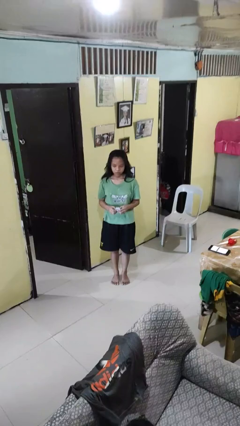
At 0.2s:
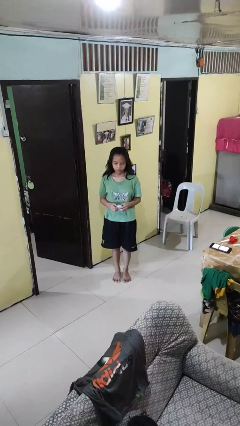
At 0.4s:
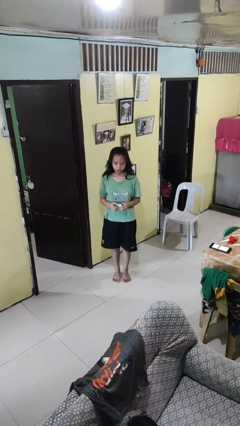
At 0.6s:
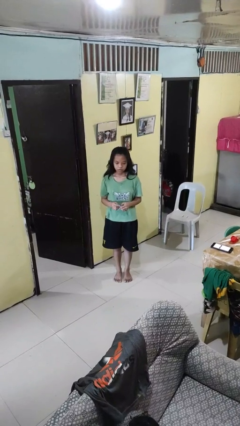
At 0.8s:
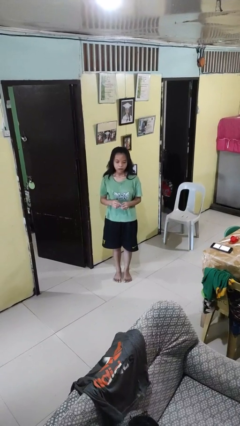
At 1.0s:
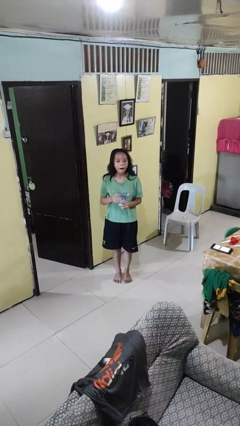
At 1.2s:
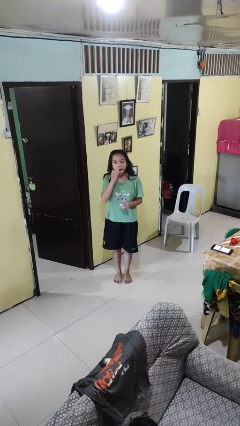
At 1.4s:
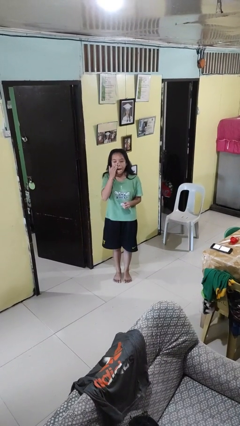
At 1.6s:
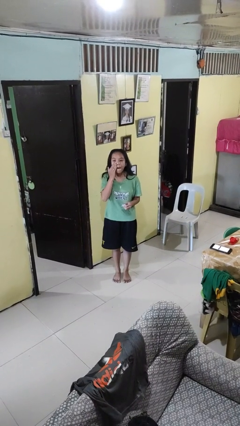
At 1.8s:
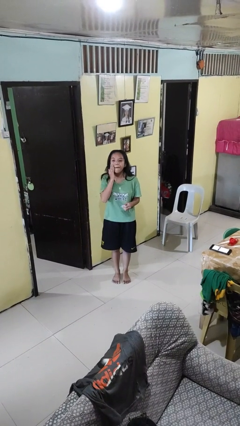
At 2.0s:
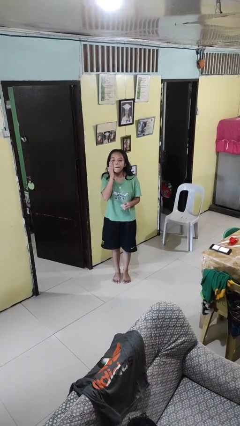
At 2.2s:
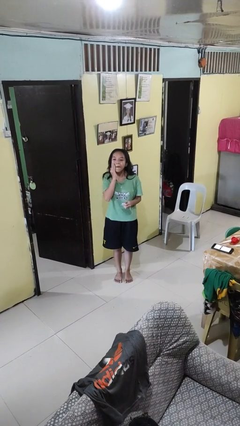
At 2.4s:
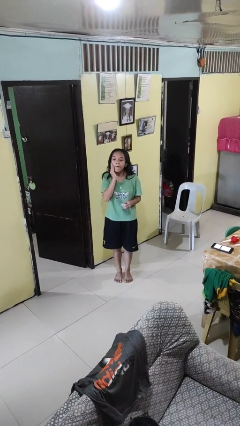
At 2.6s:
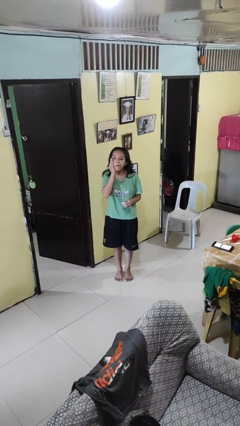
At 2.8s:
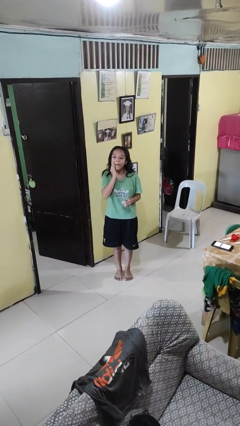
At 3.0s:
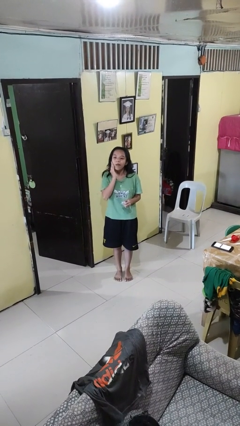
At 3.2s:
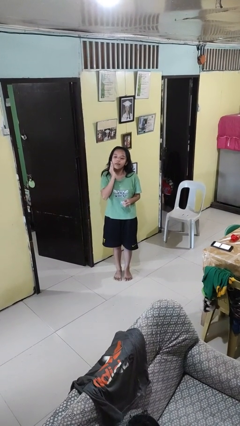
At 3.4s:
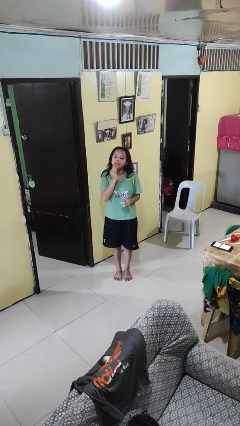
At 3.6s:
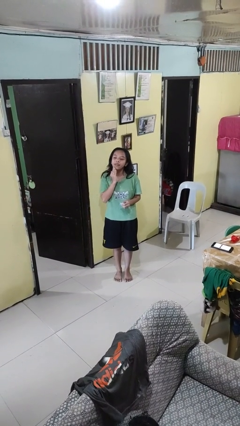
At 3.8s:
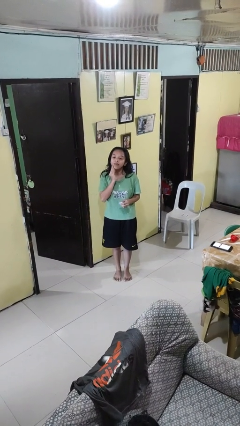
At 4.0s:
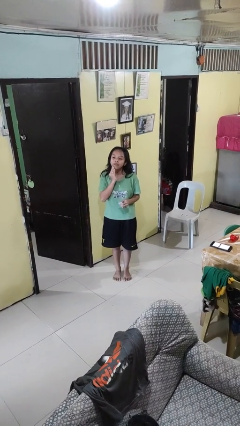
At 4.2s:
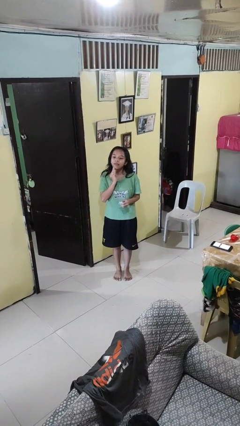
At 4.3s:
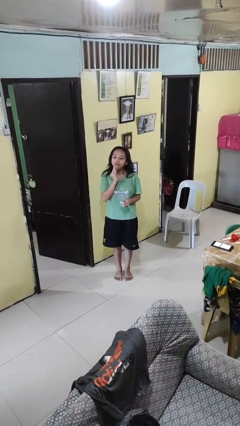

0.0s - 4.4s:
person applies facial moisturizer

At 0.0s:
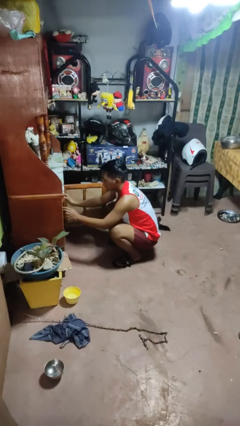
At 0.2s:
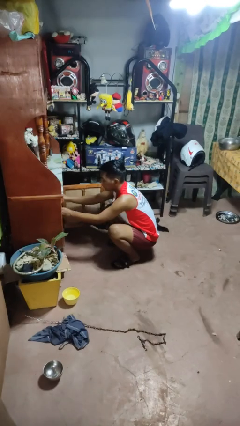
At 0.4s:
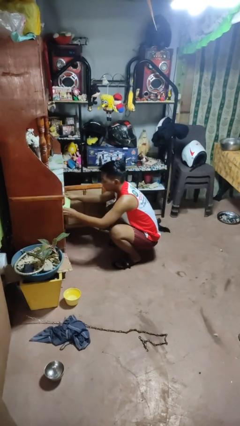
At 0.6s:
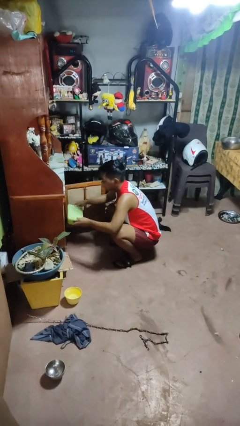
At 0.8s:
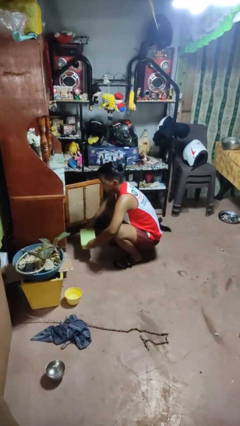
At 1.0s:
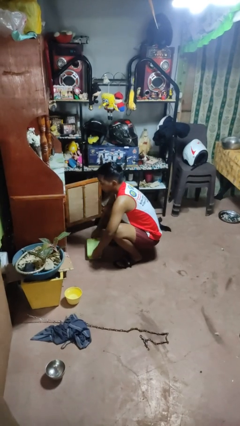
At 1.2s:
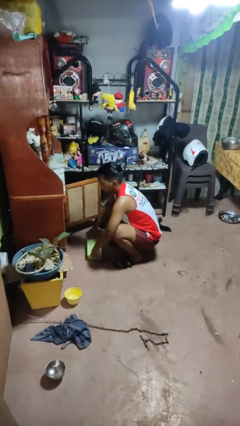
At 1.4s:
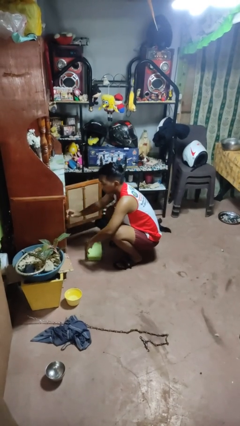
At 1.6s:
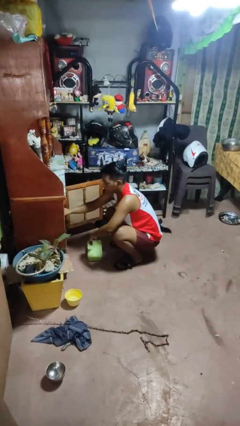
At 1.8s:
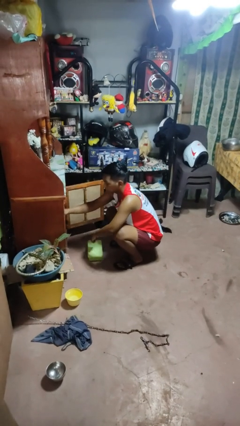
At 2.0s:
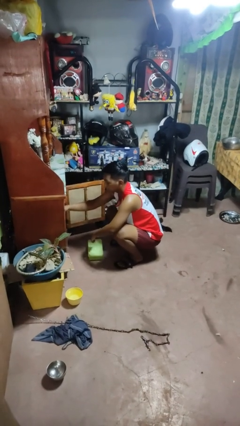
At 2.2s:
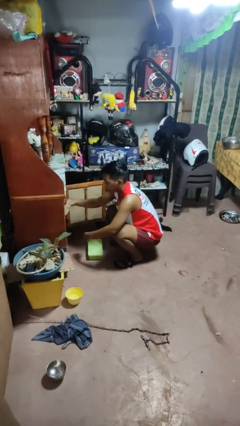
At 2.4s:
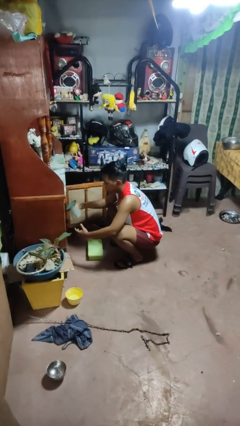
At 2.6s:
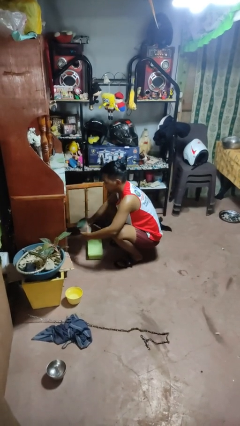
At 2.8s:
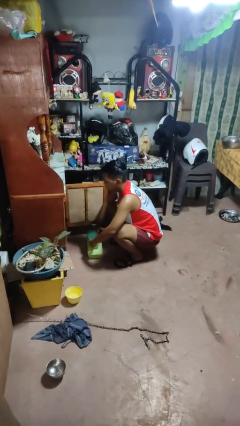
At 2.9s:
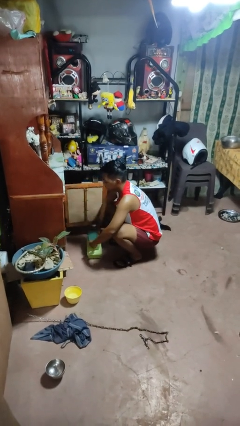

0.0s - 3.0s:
person takes object from cabinet

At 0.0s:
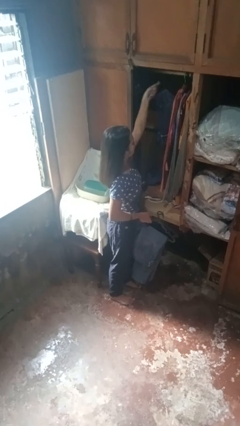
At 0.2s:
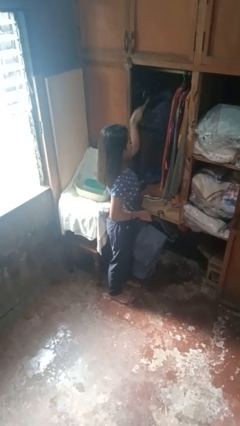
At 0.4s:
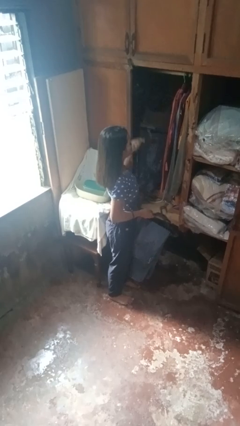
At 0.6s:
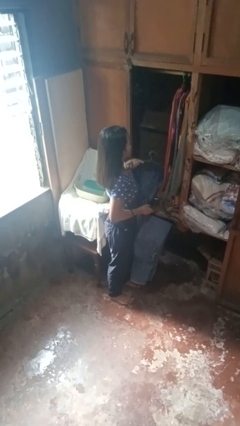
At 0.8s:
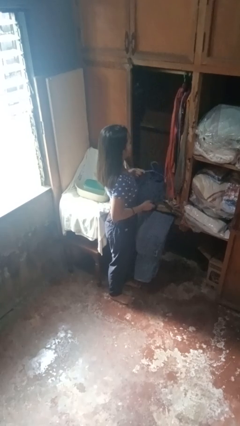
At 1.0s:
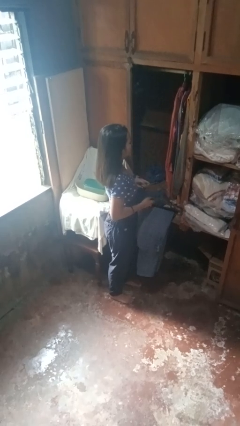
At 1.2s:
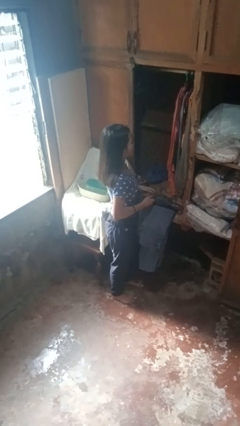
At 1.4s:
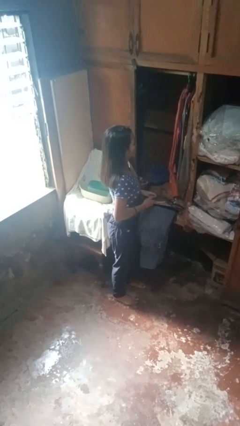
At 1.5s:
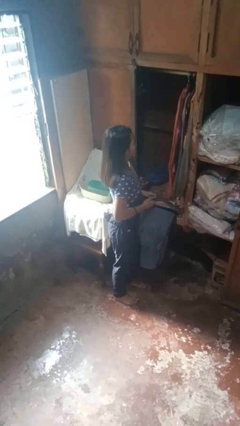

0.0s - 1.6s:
person takes clothes from closet

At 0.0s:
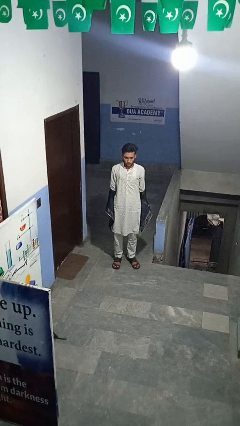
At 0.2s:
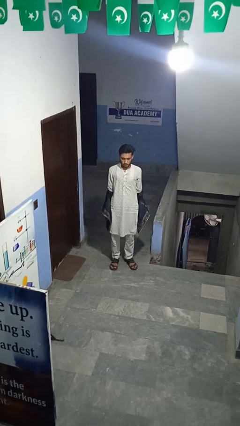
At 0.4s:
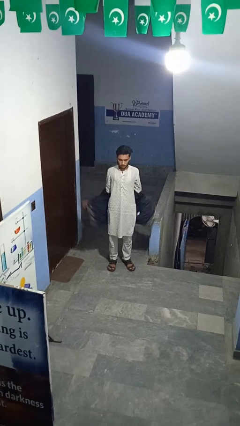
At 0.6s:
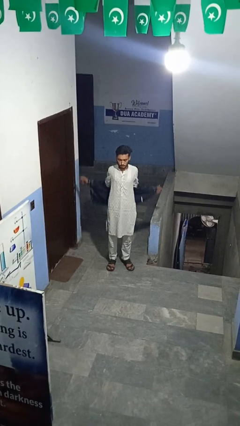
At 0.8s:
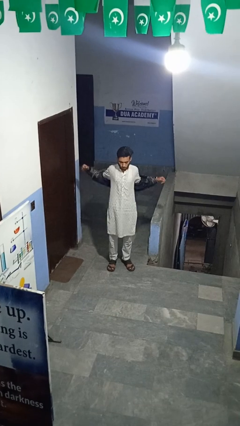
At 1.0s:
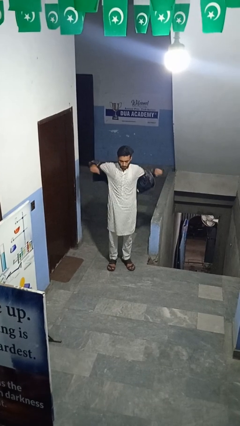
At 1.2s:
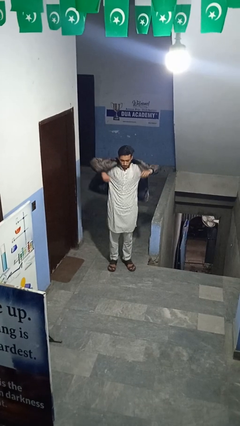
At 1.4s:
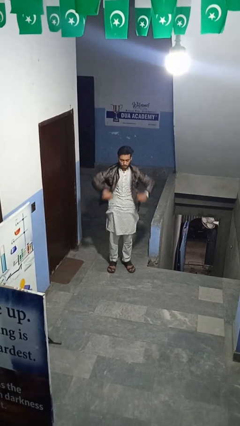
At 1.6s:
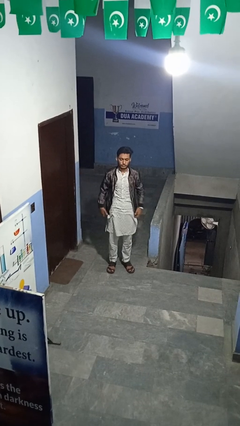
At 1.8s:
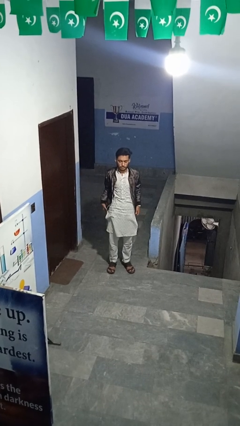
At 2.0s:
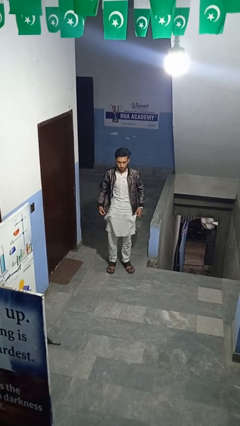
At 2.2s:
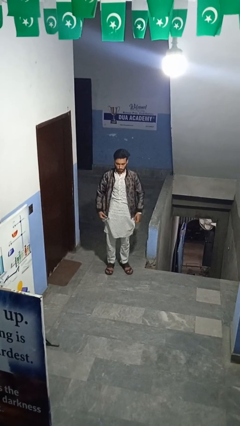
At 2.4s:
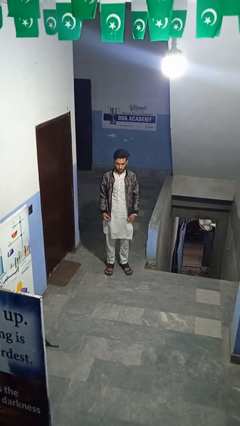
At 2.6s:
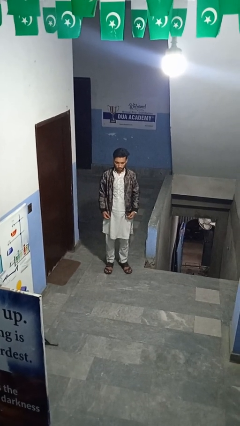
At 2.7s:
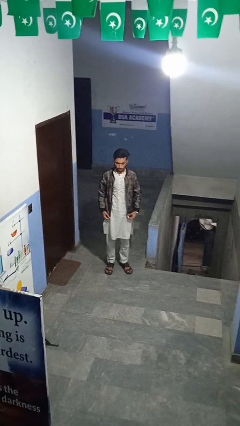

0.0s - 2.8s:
person puts on jacket

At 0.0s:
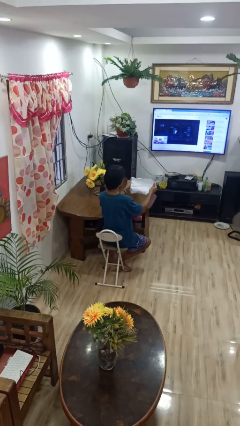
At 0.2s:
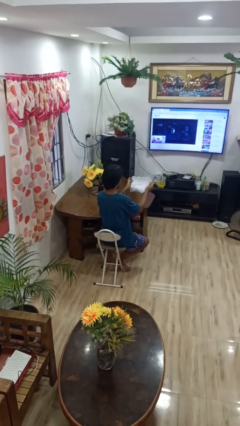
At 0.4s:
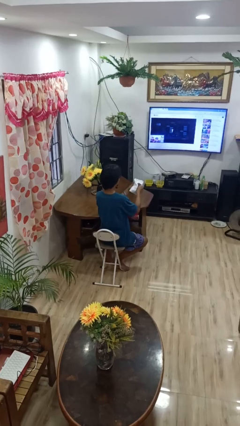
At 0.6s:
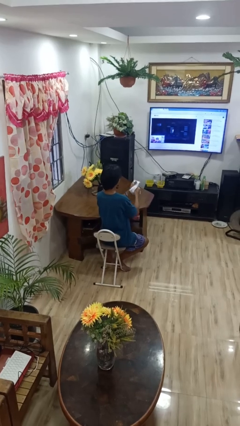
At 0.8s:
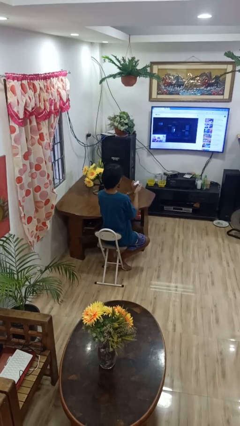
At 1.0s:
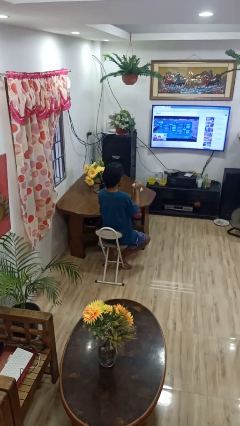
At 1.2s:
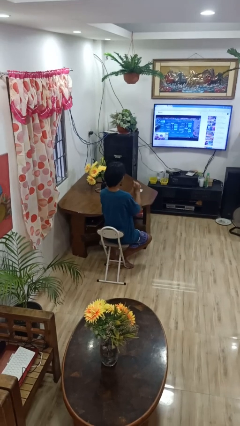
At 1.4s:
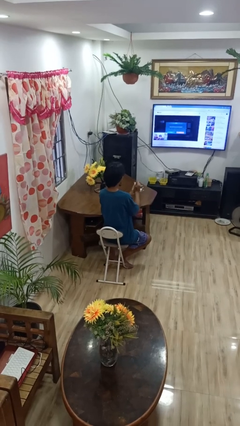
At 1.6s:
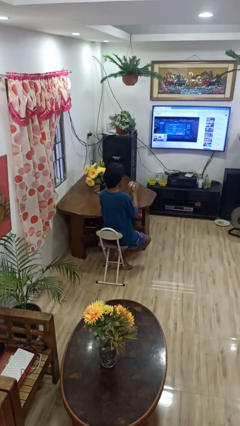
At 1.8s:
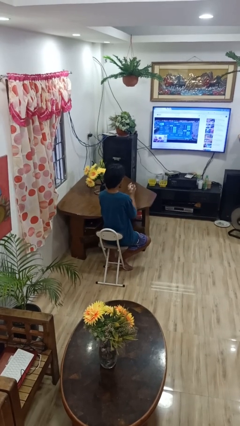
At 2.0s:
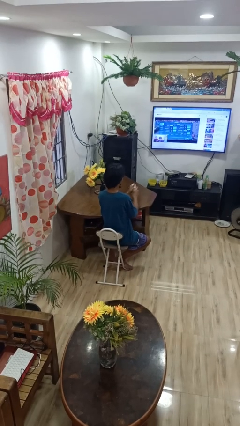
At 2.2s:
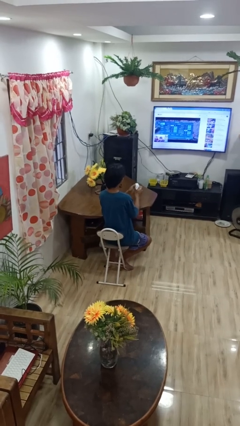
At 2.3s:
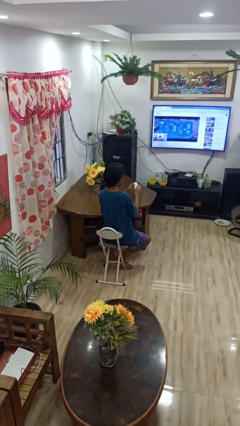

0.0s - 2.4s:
person crumples paper

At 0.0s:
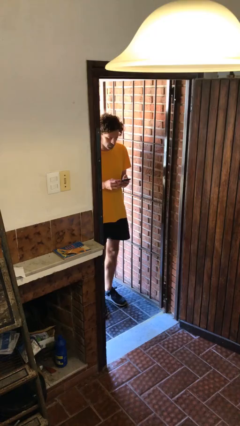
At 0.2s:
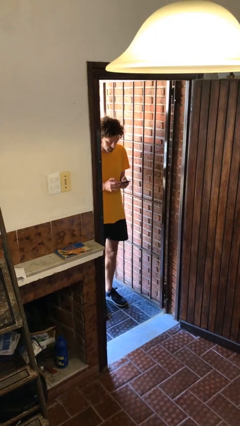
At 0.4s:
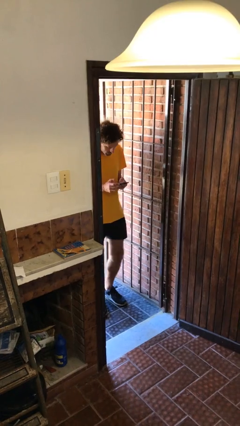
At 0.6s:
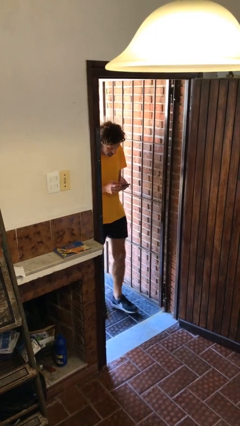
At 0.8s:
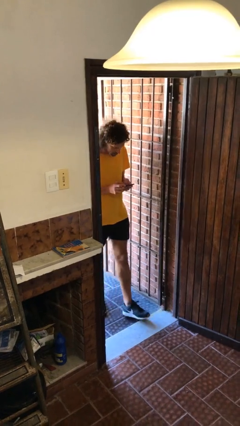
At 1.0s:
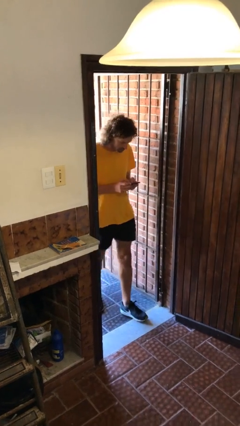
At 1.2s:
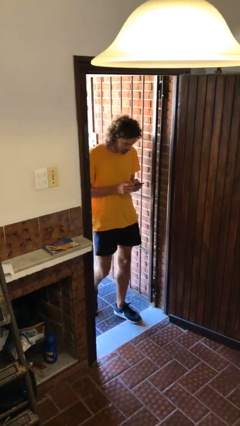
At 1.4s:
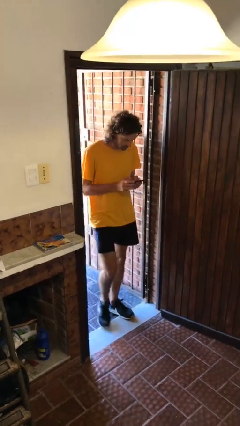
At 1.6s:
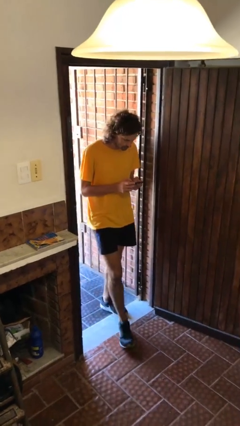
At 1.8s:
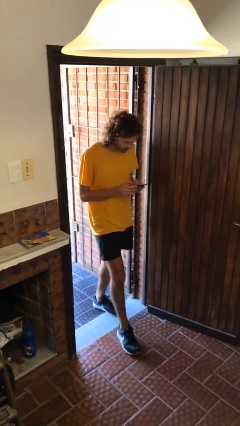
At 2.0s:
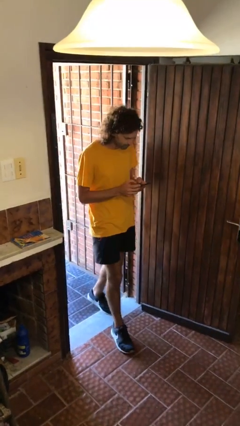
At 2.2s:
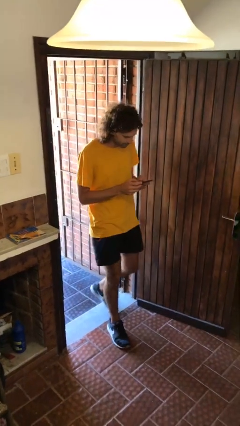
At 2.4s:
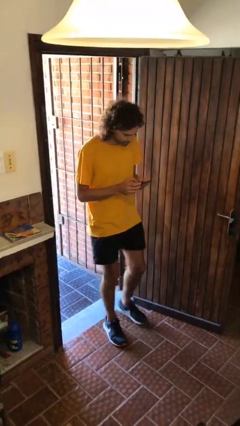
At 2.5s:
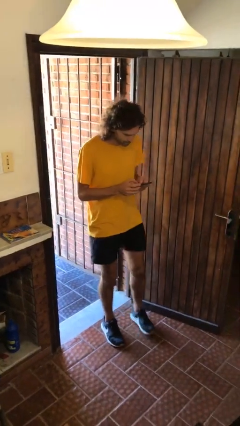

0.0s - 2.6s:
person enters scene through structure

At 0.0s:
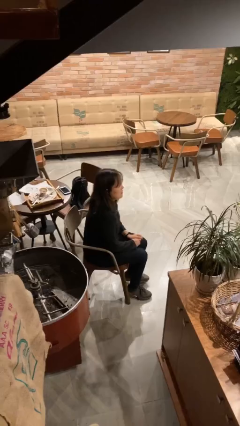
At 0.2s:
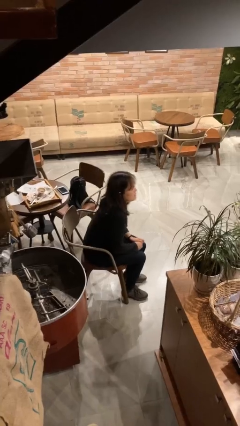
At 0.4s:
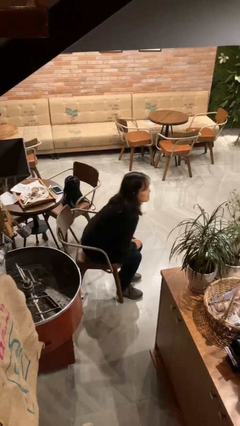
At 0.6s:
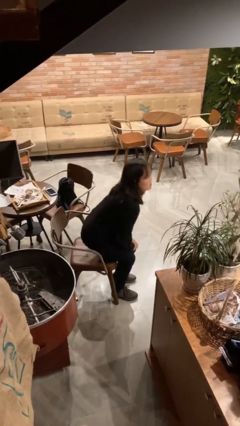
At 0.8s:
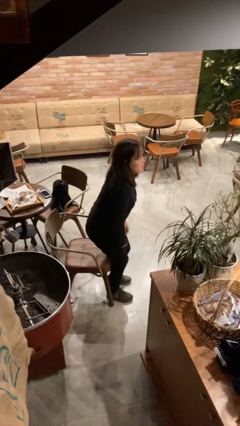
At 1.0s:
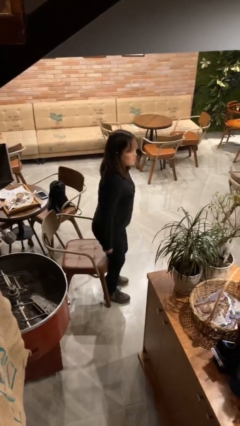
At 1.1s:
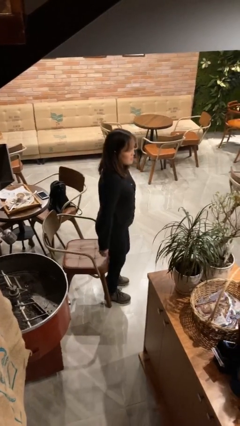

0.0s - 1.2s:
person stands up
